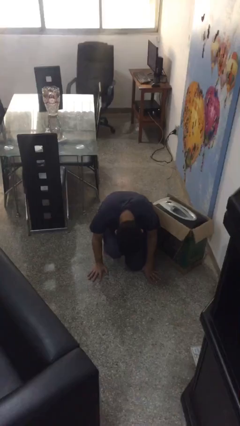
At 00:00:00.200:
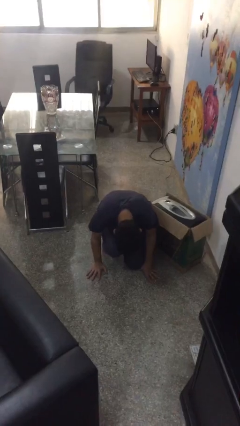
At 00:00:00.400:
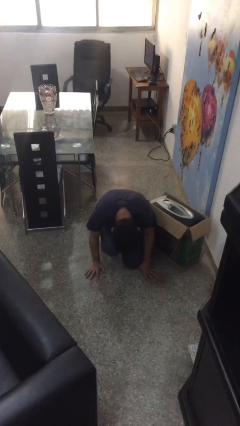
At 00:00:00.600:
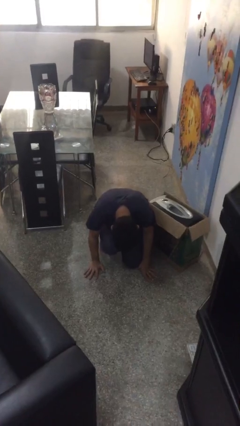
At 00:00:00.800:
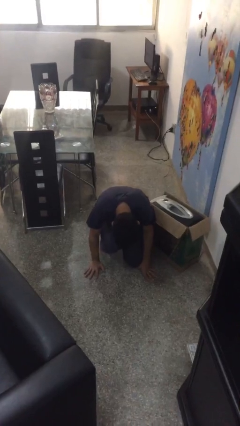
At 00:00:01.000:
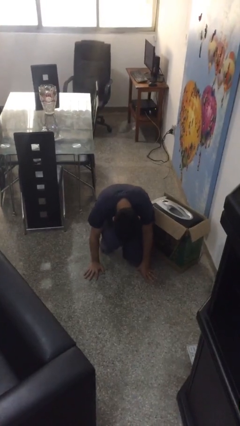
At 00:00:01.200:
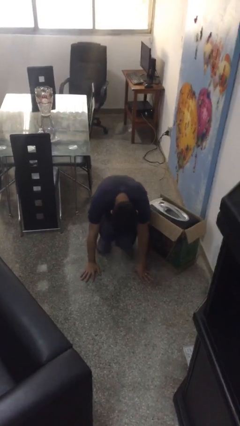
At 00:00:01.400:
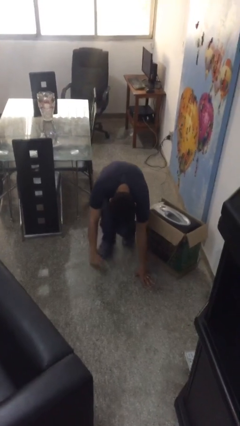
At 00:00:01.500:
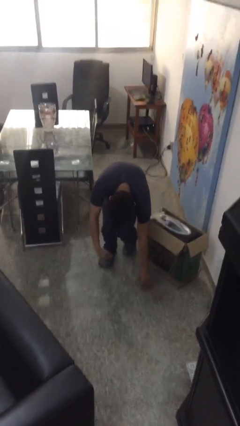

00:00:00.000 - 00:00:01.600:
person lies down on floor

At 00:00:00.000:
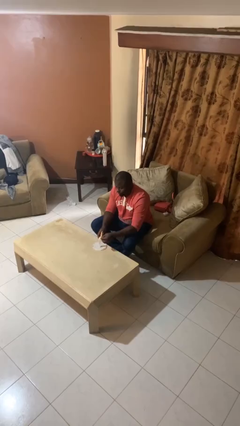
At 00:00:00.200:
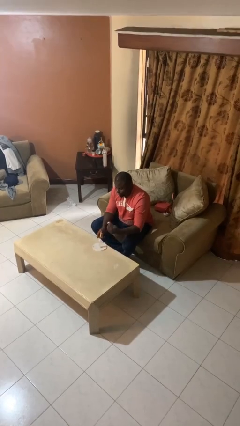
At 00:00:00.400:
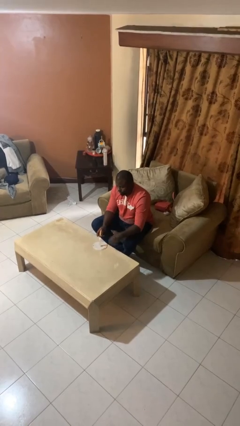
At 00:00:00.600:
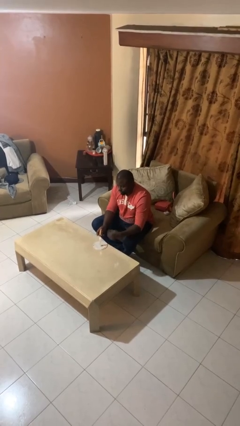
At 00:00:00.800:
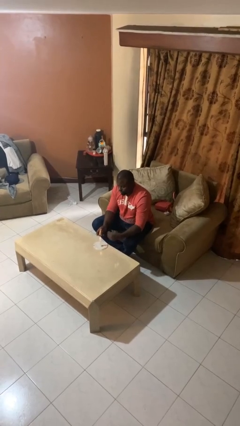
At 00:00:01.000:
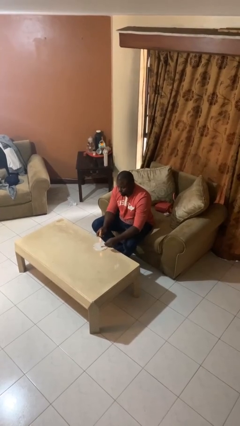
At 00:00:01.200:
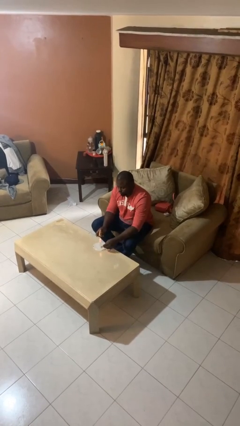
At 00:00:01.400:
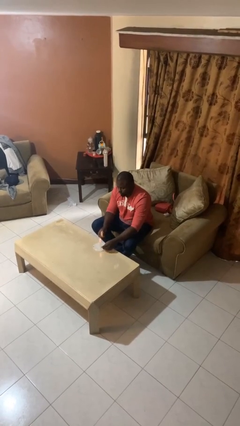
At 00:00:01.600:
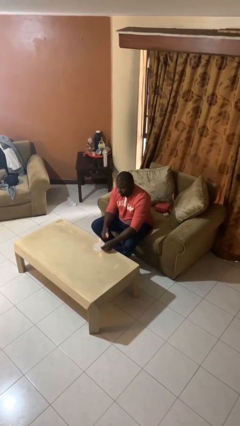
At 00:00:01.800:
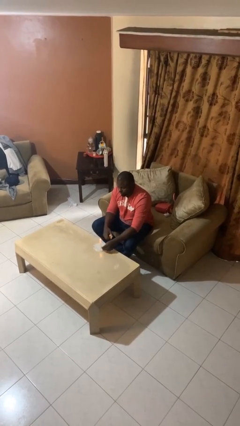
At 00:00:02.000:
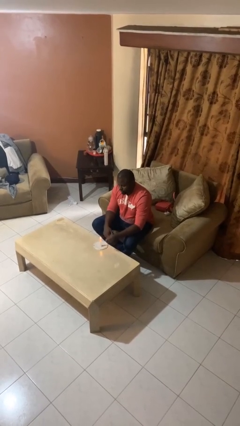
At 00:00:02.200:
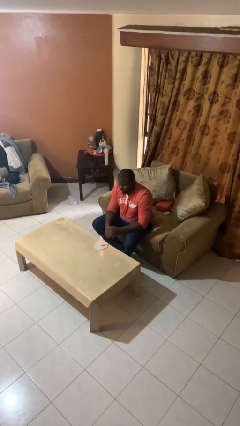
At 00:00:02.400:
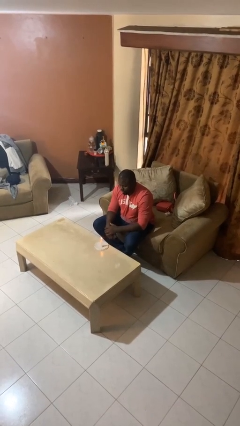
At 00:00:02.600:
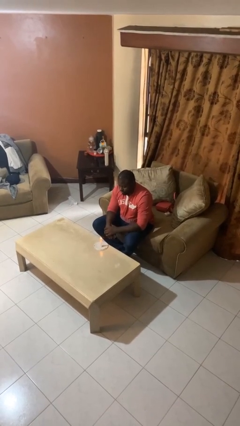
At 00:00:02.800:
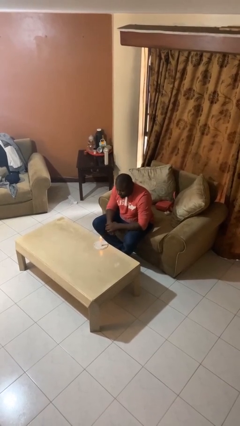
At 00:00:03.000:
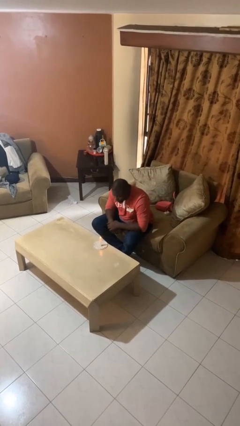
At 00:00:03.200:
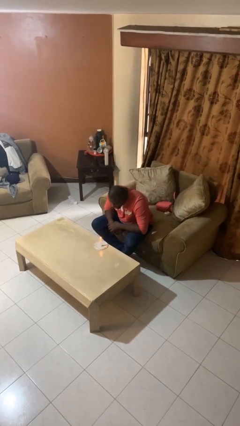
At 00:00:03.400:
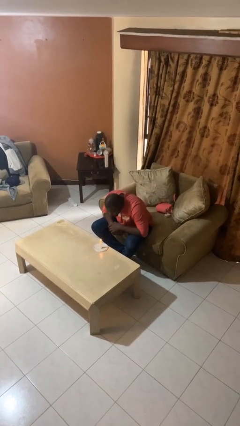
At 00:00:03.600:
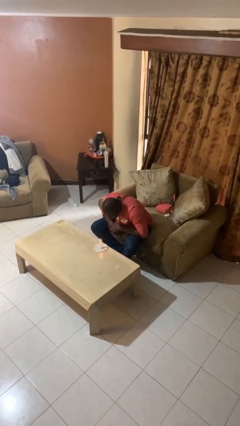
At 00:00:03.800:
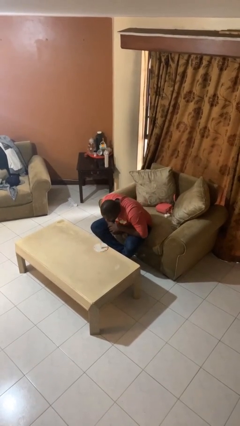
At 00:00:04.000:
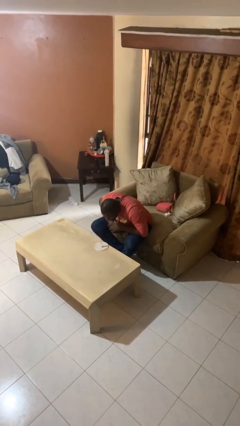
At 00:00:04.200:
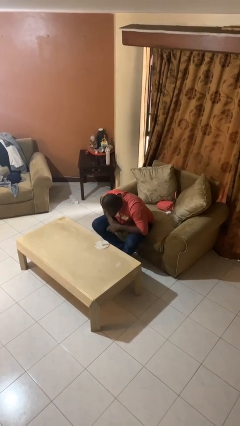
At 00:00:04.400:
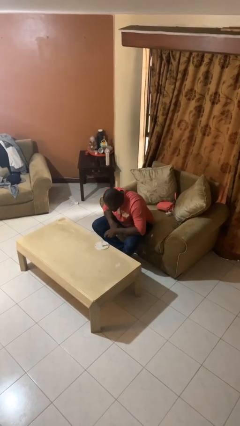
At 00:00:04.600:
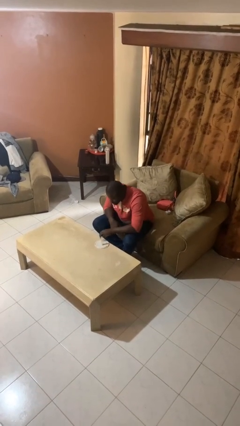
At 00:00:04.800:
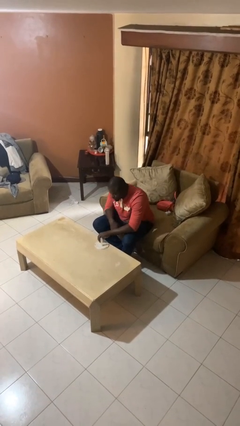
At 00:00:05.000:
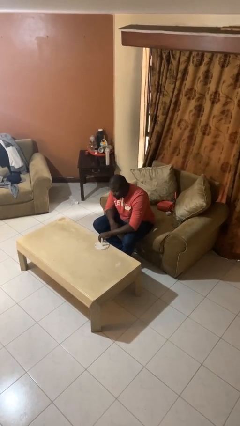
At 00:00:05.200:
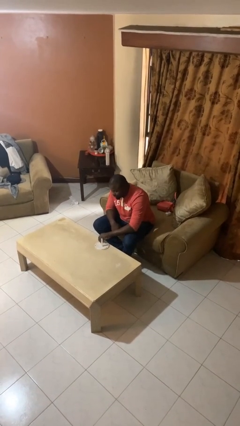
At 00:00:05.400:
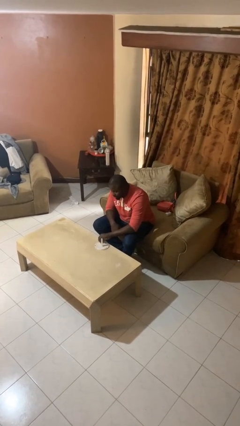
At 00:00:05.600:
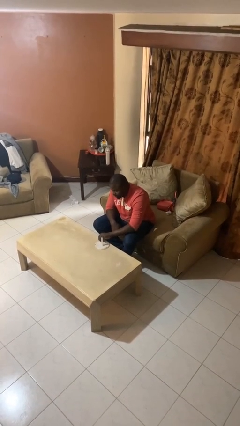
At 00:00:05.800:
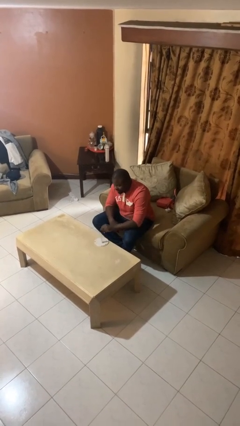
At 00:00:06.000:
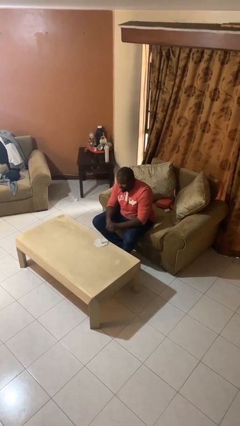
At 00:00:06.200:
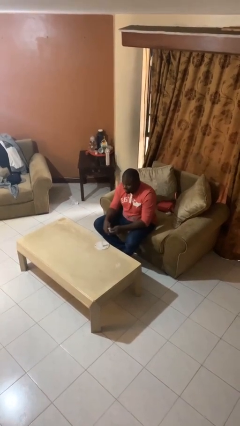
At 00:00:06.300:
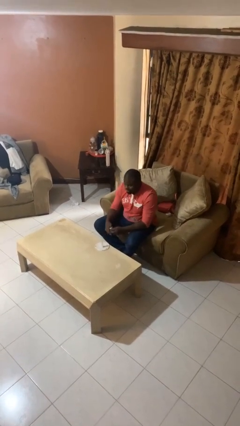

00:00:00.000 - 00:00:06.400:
person extinguishes candle

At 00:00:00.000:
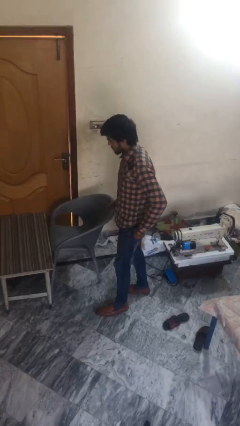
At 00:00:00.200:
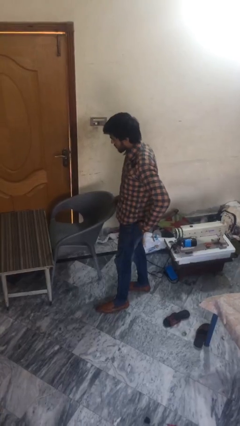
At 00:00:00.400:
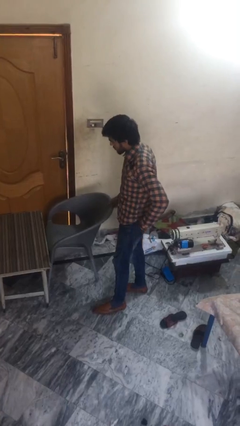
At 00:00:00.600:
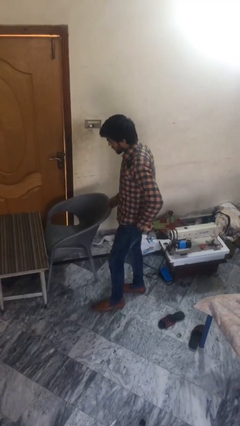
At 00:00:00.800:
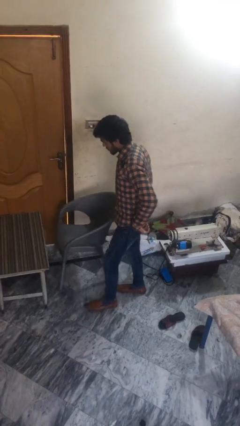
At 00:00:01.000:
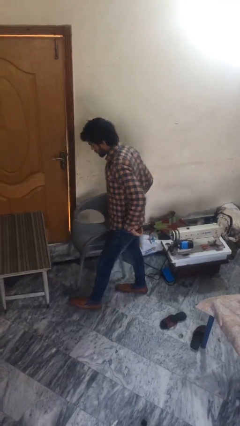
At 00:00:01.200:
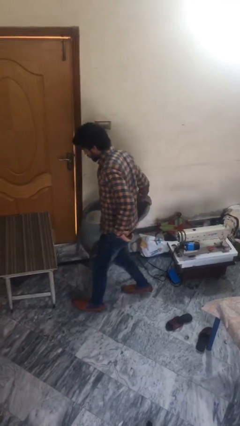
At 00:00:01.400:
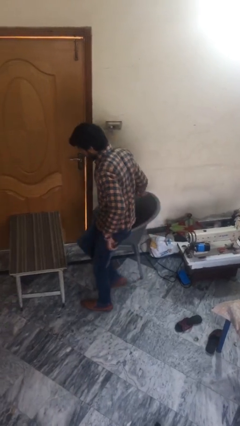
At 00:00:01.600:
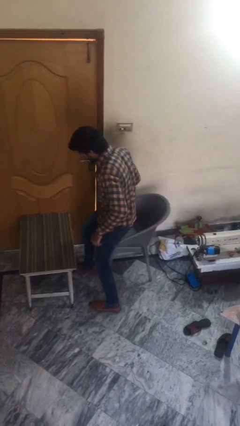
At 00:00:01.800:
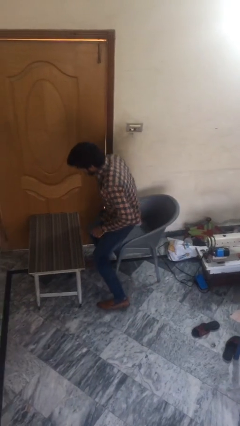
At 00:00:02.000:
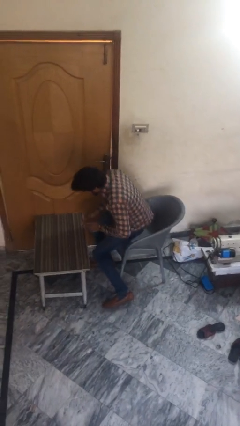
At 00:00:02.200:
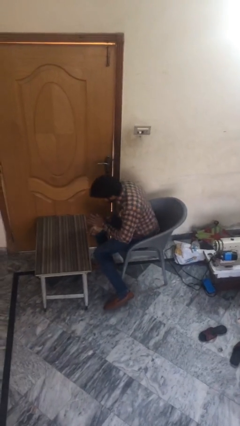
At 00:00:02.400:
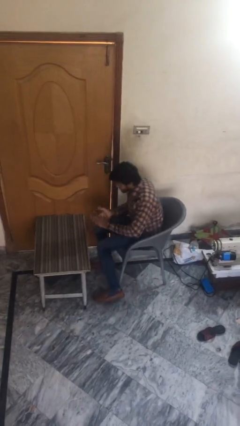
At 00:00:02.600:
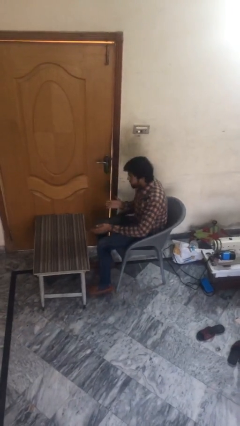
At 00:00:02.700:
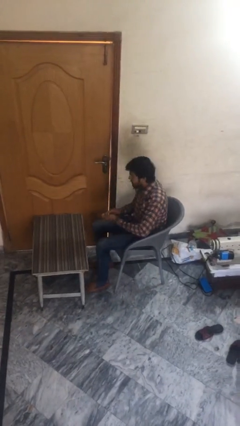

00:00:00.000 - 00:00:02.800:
person sits down

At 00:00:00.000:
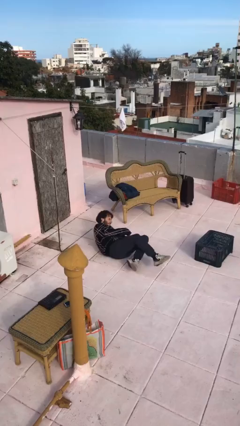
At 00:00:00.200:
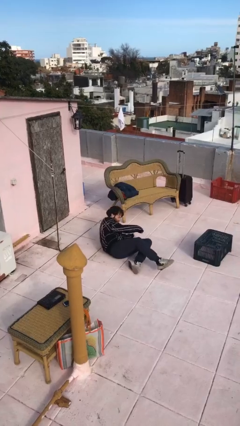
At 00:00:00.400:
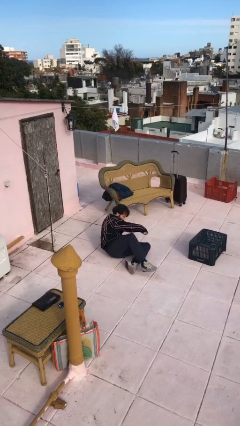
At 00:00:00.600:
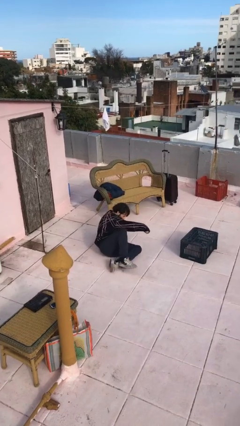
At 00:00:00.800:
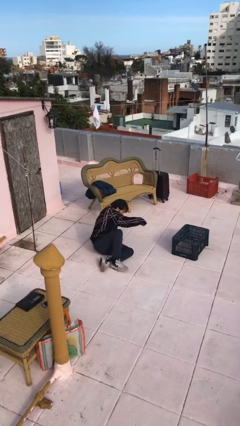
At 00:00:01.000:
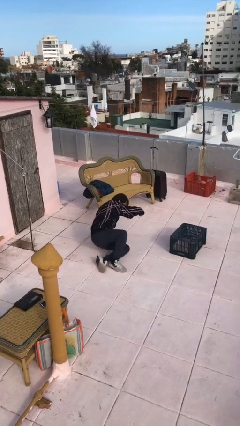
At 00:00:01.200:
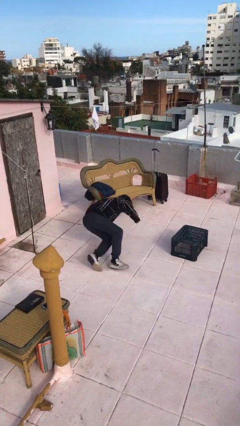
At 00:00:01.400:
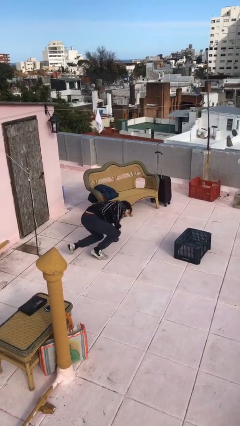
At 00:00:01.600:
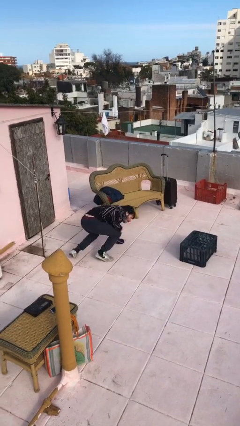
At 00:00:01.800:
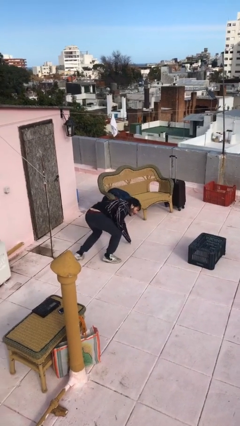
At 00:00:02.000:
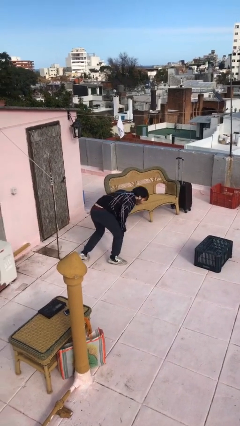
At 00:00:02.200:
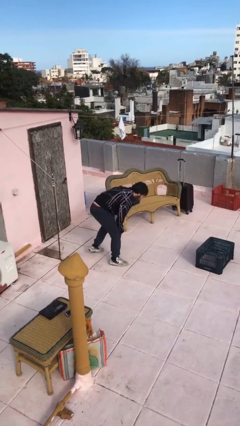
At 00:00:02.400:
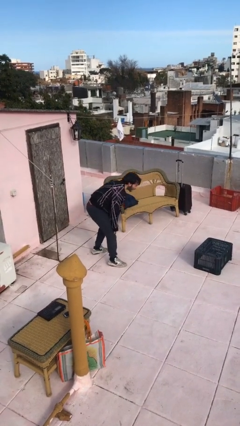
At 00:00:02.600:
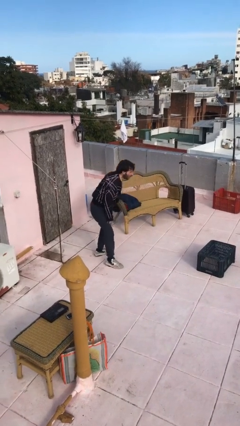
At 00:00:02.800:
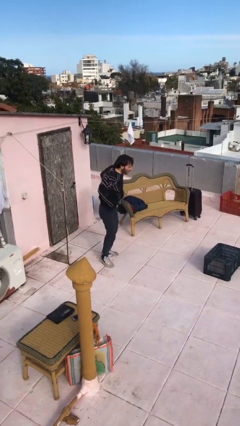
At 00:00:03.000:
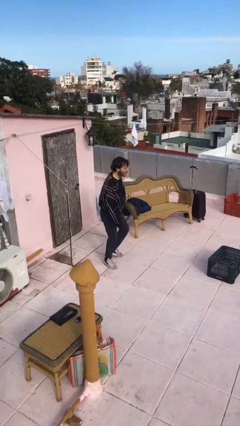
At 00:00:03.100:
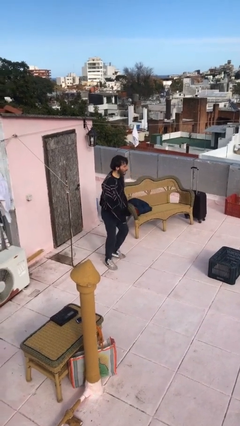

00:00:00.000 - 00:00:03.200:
person stands up from floor

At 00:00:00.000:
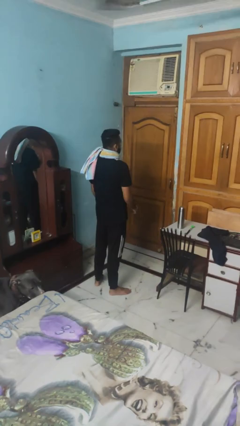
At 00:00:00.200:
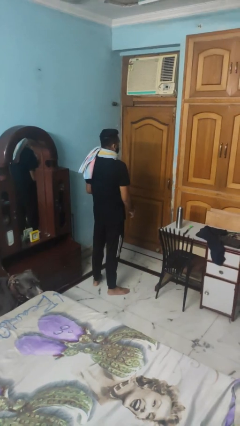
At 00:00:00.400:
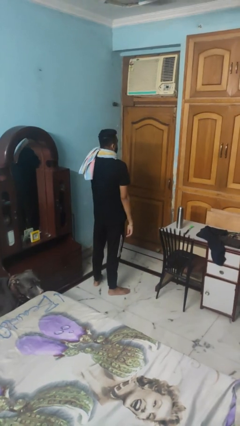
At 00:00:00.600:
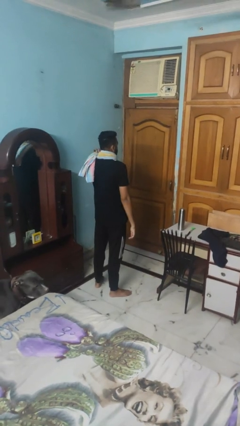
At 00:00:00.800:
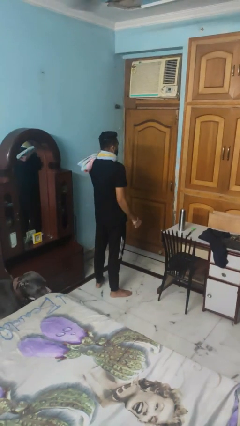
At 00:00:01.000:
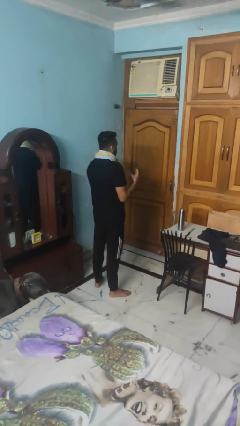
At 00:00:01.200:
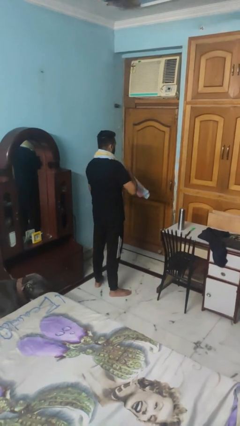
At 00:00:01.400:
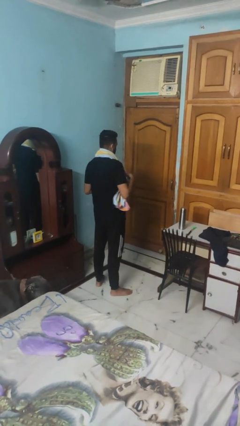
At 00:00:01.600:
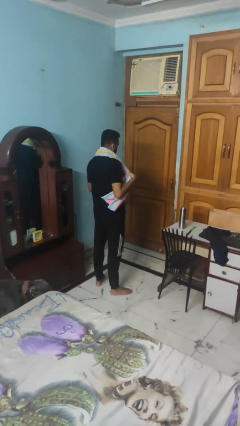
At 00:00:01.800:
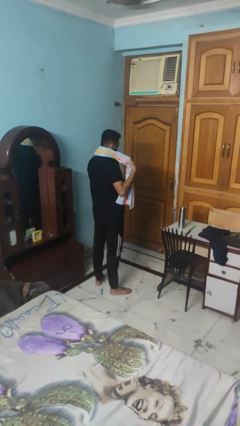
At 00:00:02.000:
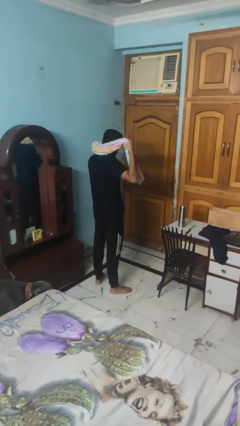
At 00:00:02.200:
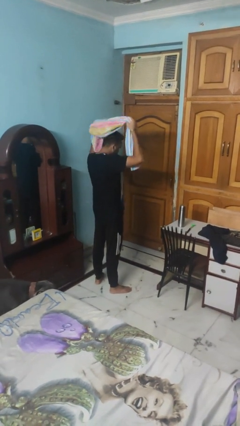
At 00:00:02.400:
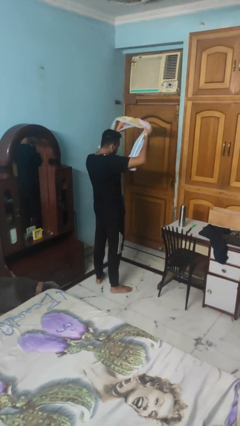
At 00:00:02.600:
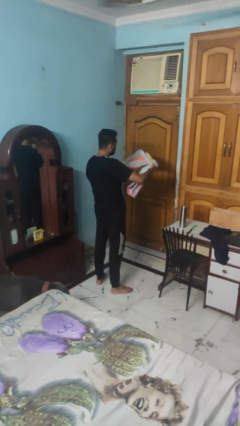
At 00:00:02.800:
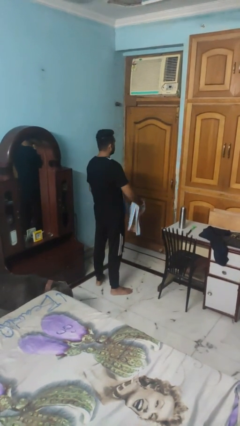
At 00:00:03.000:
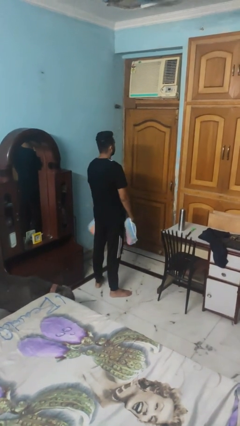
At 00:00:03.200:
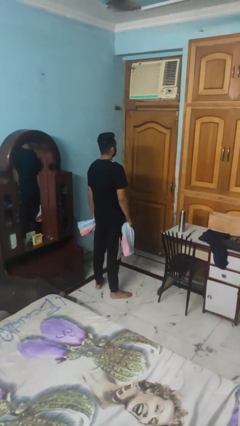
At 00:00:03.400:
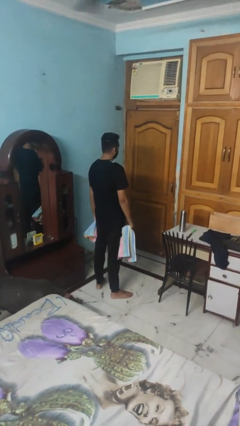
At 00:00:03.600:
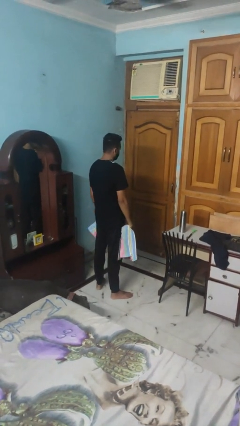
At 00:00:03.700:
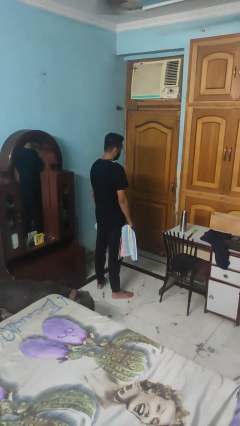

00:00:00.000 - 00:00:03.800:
person takes off scarf
